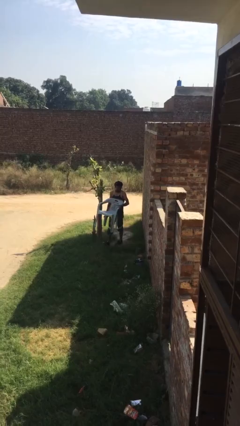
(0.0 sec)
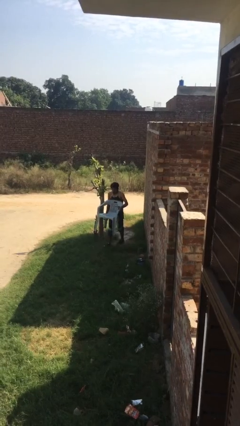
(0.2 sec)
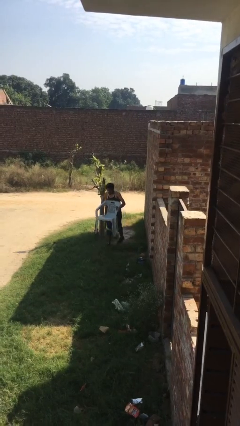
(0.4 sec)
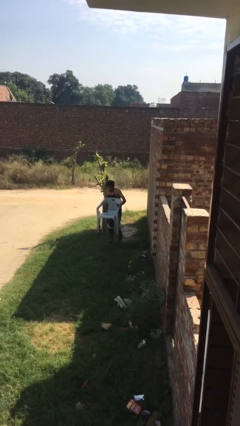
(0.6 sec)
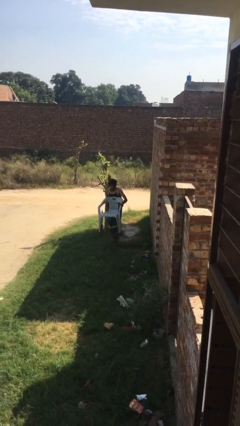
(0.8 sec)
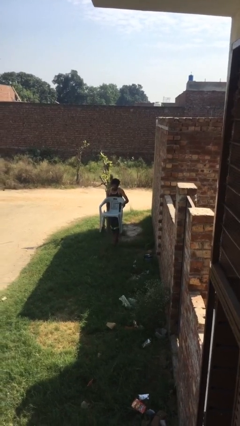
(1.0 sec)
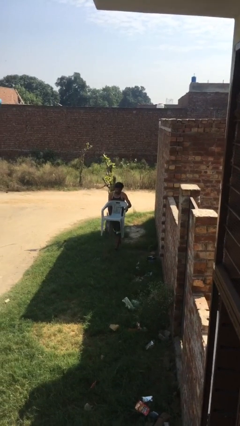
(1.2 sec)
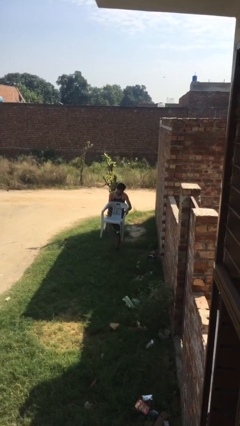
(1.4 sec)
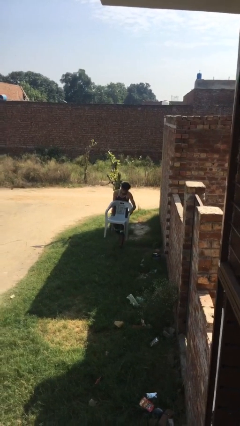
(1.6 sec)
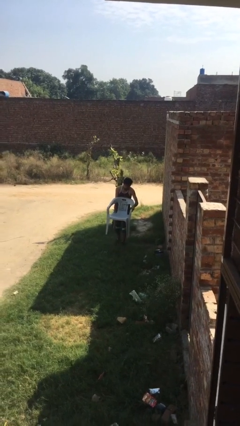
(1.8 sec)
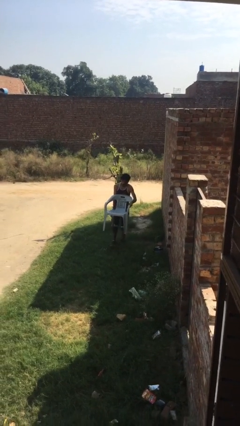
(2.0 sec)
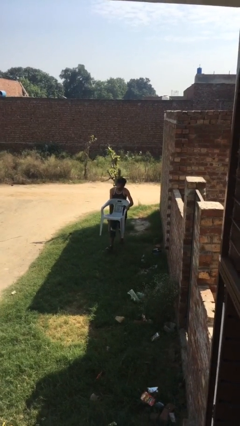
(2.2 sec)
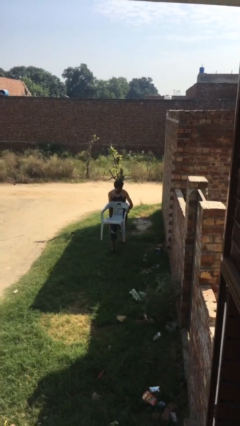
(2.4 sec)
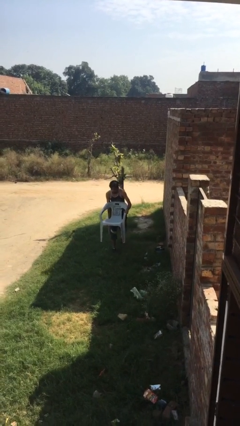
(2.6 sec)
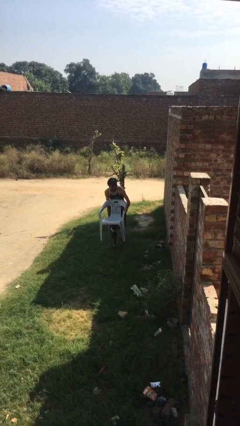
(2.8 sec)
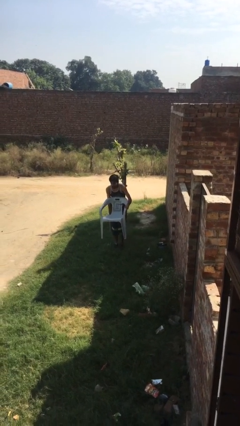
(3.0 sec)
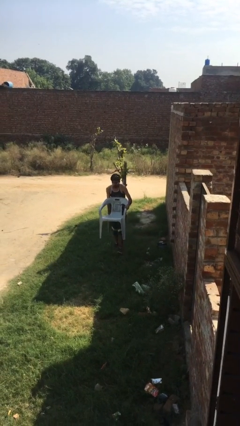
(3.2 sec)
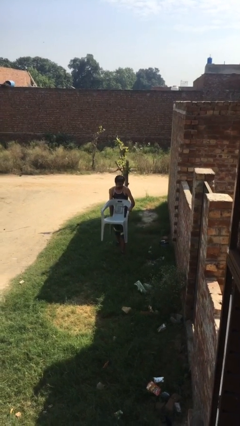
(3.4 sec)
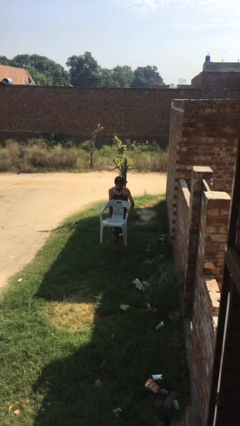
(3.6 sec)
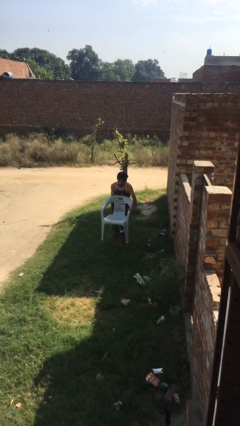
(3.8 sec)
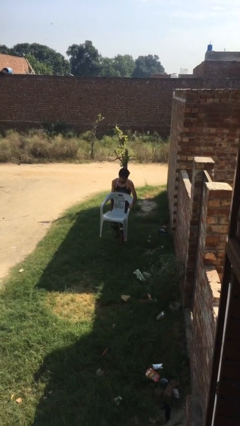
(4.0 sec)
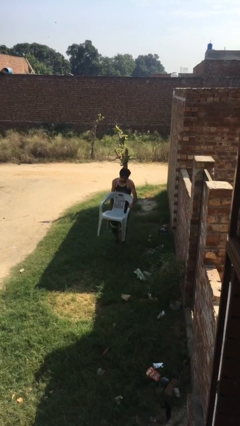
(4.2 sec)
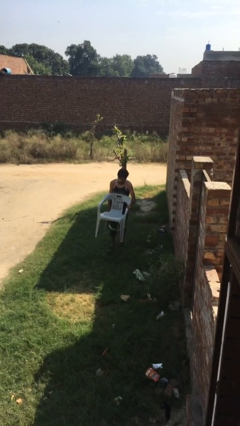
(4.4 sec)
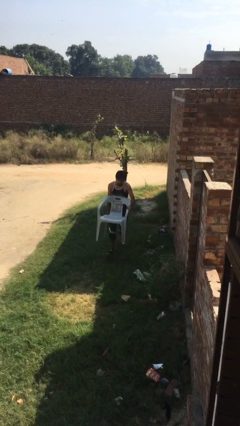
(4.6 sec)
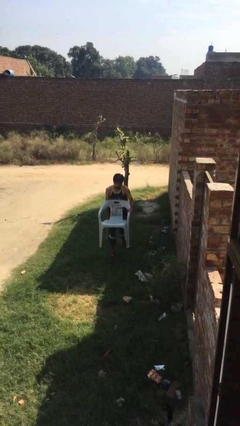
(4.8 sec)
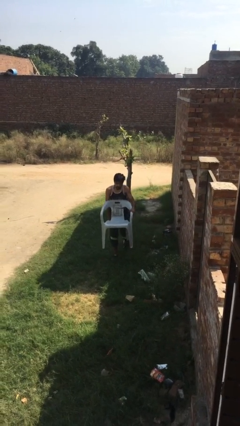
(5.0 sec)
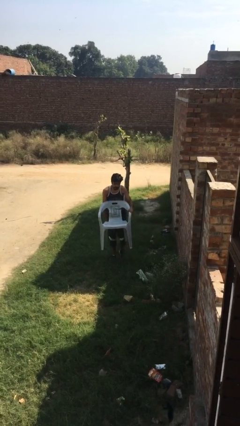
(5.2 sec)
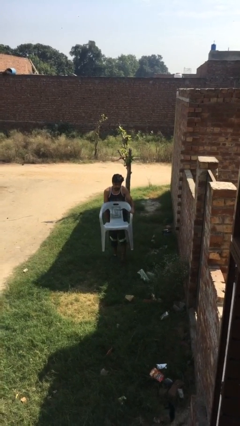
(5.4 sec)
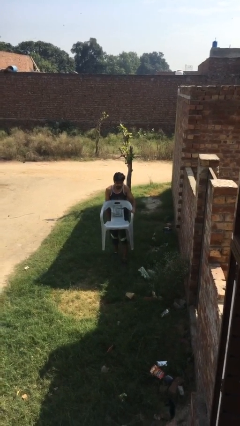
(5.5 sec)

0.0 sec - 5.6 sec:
person carries heavy object

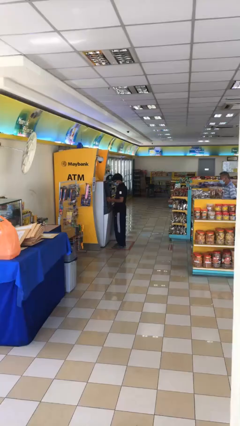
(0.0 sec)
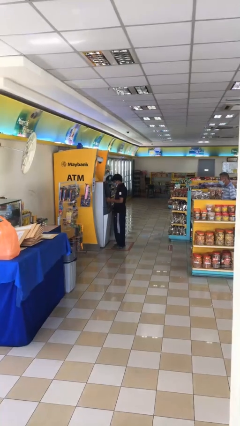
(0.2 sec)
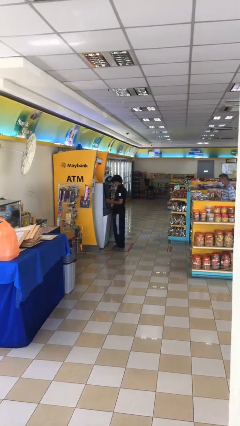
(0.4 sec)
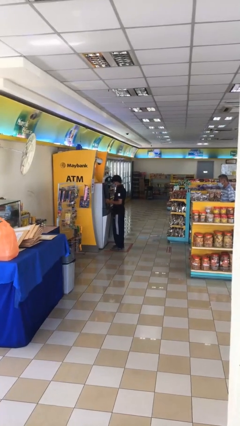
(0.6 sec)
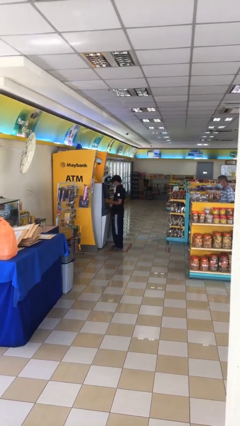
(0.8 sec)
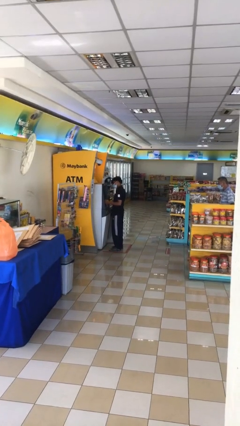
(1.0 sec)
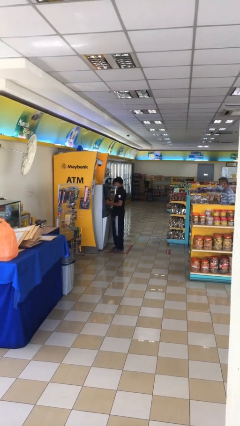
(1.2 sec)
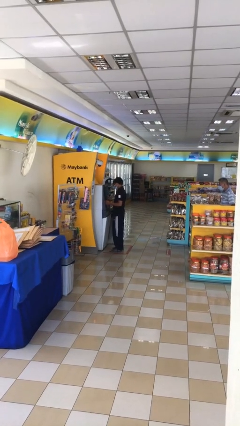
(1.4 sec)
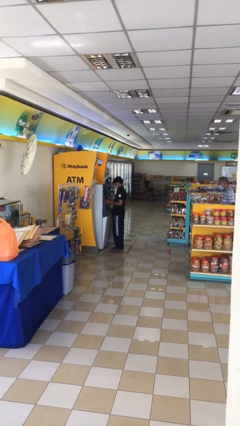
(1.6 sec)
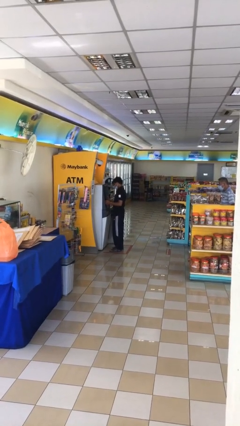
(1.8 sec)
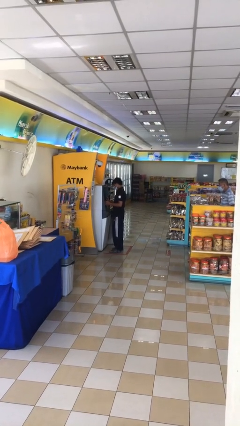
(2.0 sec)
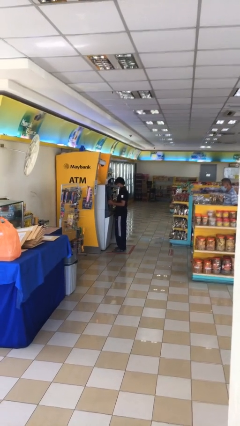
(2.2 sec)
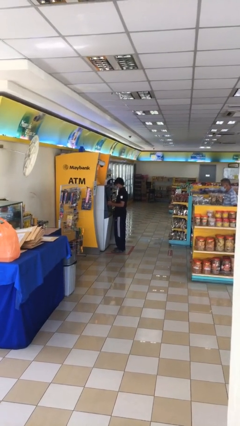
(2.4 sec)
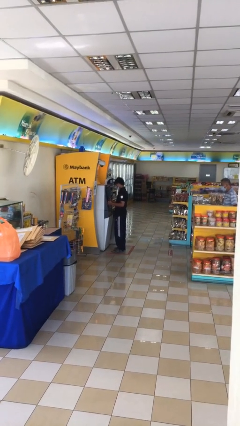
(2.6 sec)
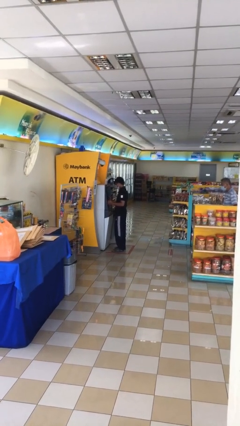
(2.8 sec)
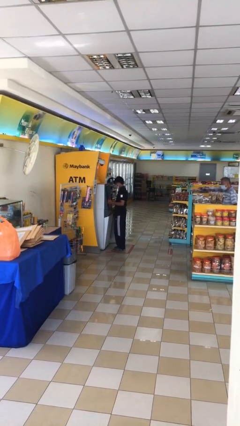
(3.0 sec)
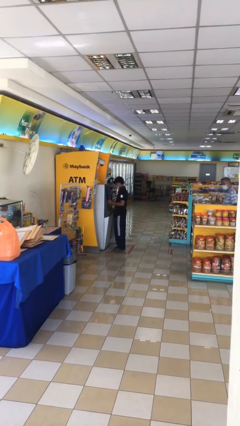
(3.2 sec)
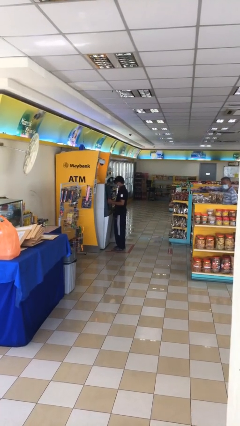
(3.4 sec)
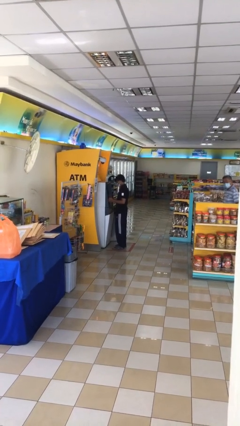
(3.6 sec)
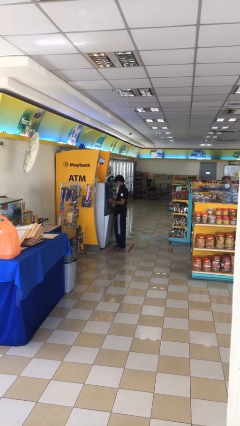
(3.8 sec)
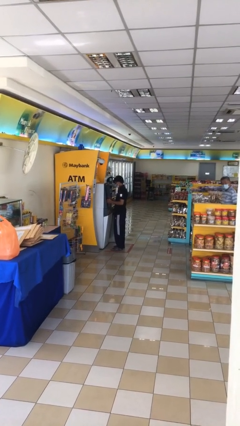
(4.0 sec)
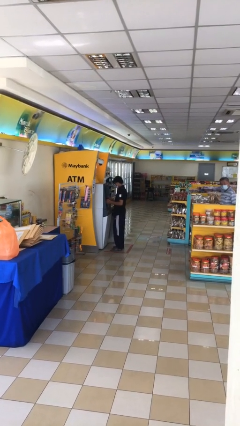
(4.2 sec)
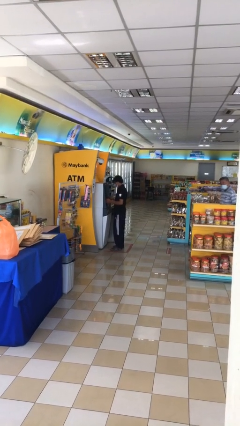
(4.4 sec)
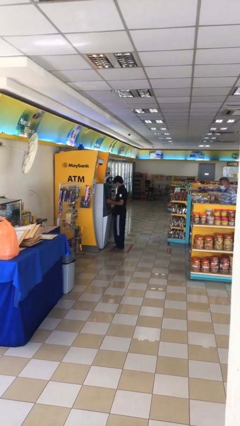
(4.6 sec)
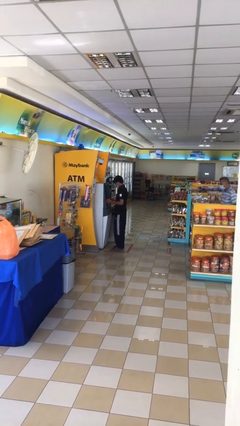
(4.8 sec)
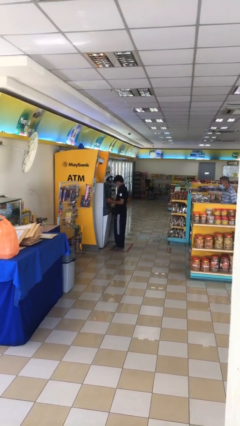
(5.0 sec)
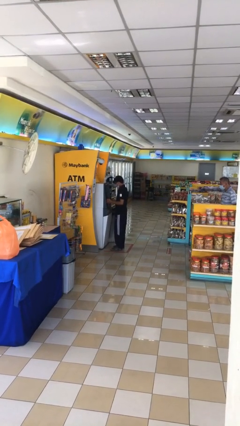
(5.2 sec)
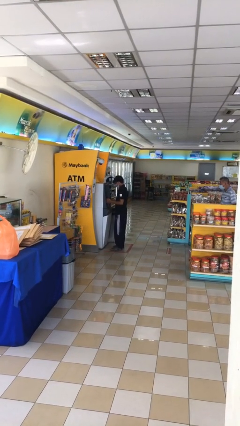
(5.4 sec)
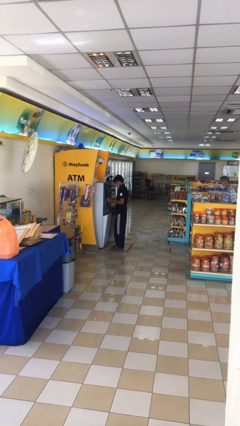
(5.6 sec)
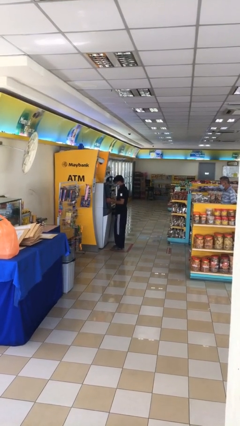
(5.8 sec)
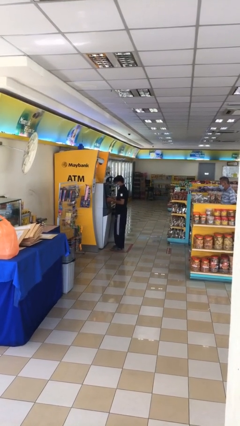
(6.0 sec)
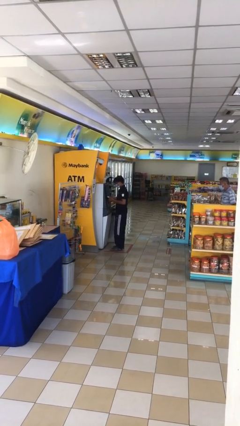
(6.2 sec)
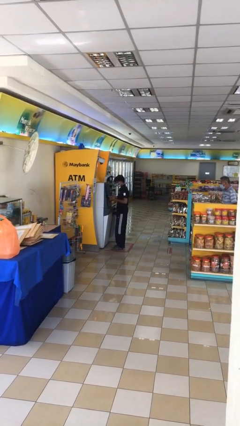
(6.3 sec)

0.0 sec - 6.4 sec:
person purchases from machine

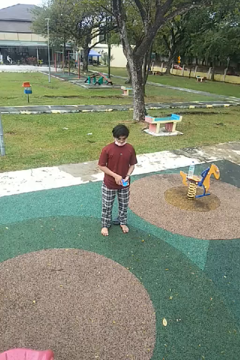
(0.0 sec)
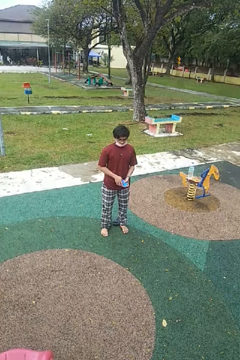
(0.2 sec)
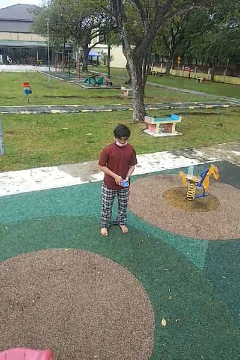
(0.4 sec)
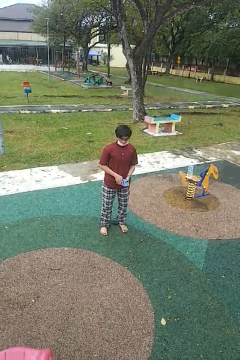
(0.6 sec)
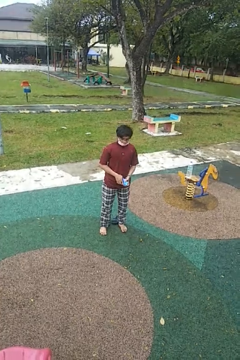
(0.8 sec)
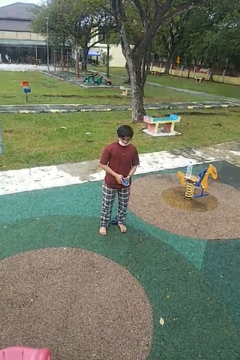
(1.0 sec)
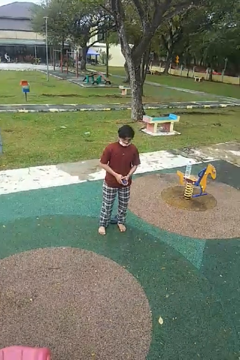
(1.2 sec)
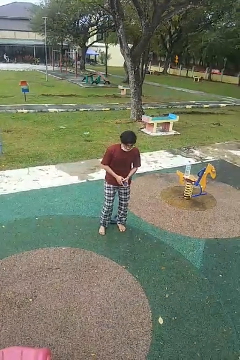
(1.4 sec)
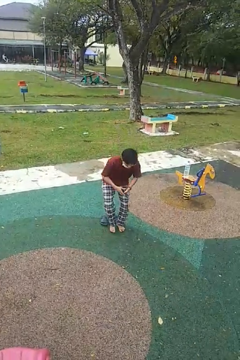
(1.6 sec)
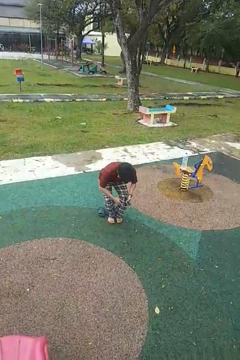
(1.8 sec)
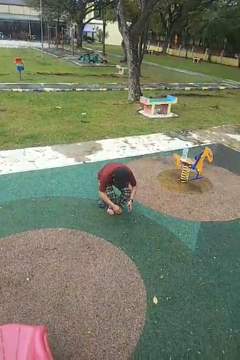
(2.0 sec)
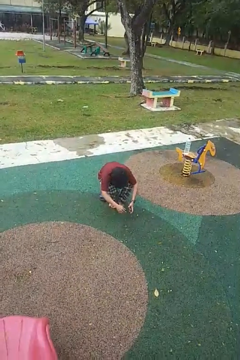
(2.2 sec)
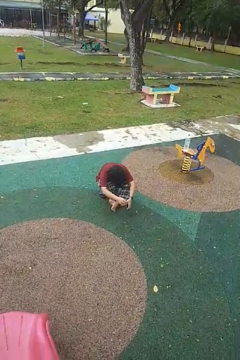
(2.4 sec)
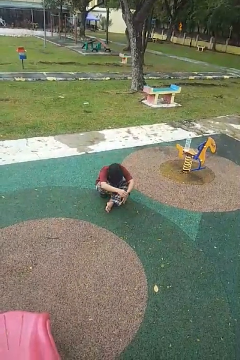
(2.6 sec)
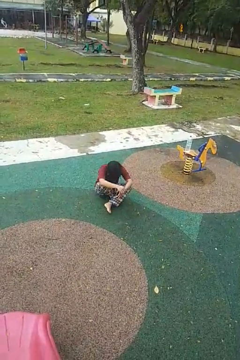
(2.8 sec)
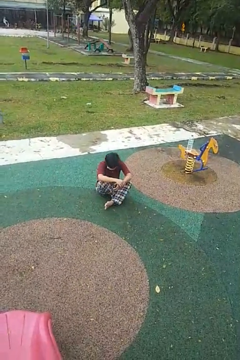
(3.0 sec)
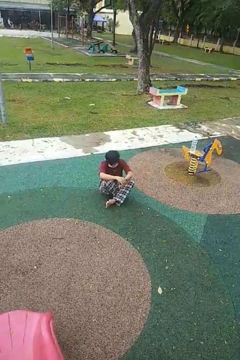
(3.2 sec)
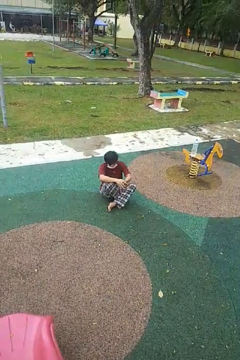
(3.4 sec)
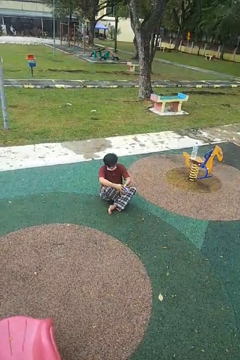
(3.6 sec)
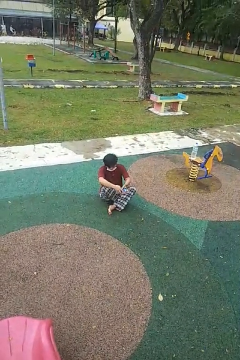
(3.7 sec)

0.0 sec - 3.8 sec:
person sits crisscross

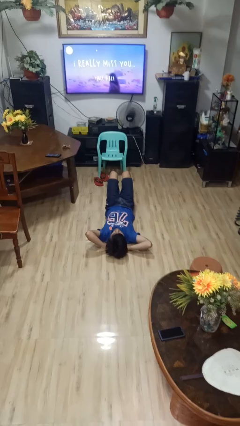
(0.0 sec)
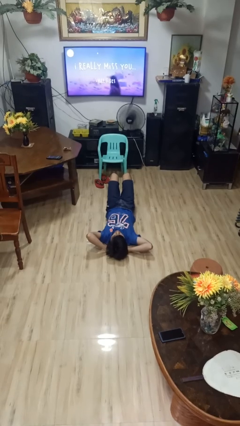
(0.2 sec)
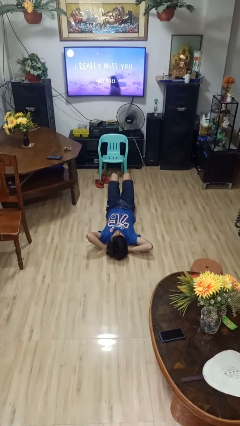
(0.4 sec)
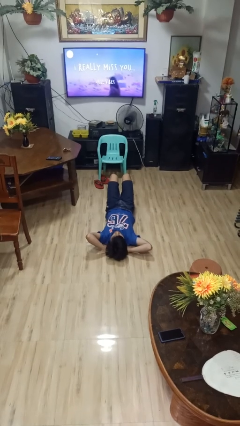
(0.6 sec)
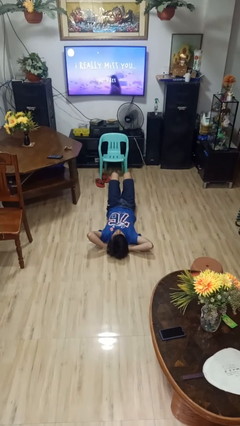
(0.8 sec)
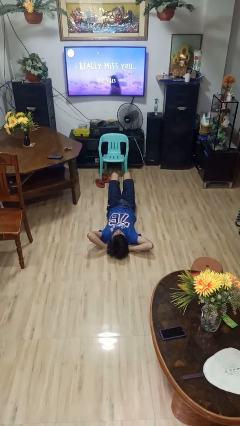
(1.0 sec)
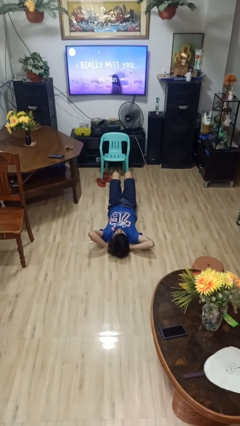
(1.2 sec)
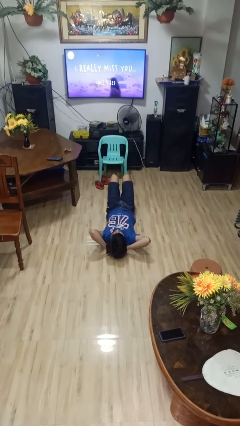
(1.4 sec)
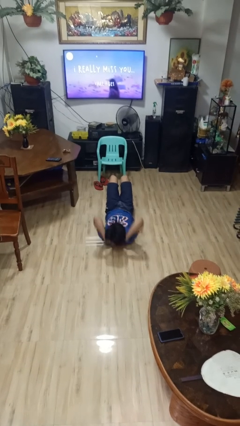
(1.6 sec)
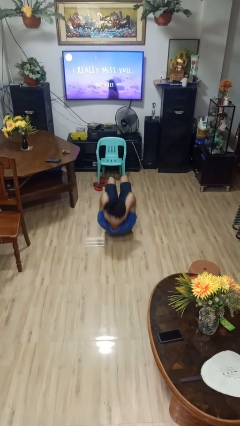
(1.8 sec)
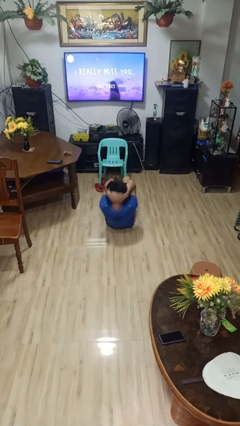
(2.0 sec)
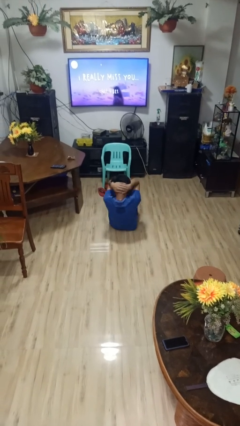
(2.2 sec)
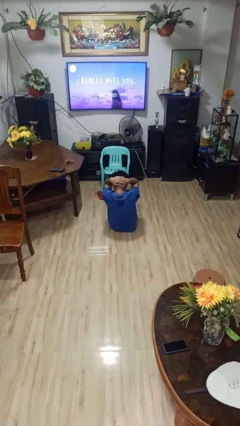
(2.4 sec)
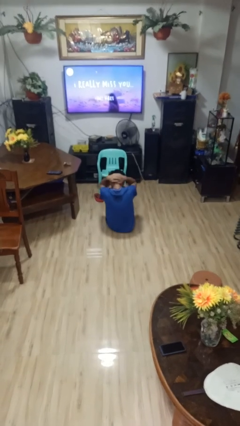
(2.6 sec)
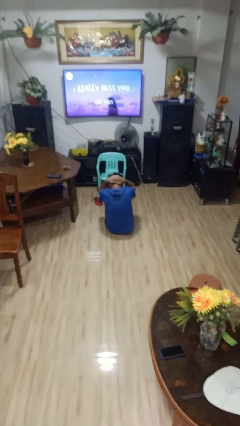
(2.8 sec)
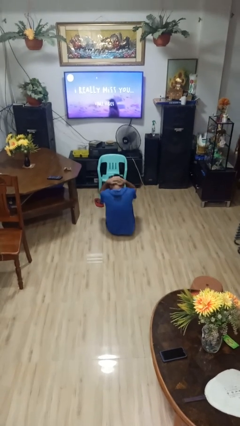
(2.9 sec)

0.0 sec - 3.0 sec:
person drinks from bottle

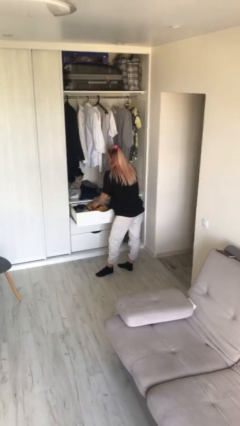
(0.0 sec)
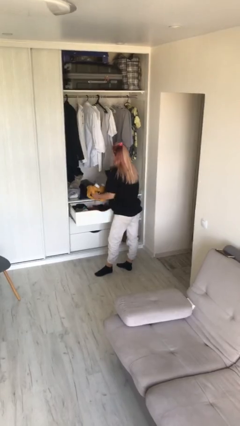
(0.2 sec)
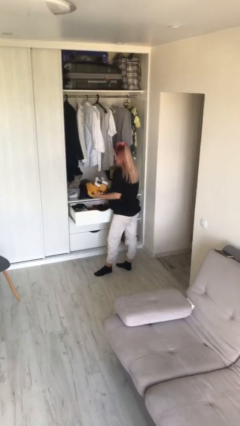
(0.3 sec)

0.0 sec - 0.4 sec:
person takes clothes from dresser
